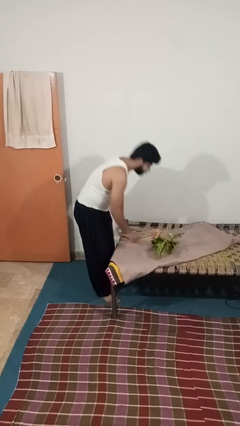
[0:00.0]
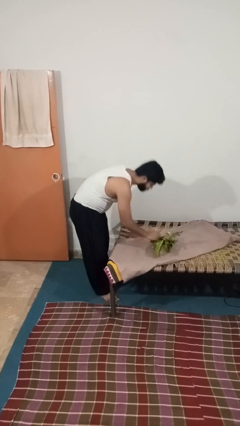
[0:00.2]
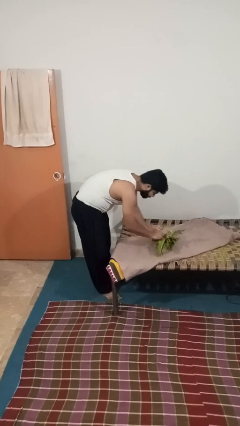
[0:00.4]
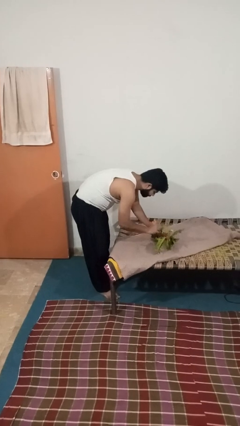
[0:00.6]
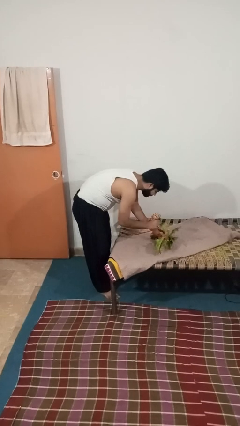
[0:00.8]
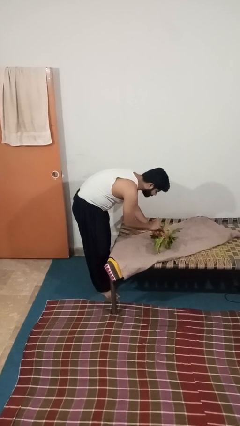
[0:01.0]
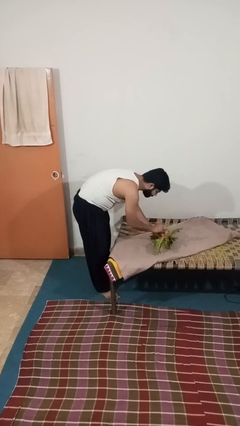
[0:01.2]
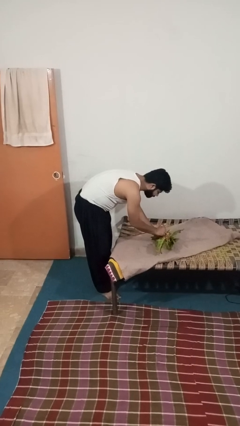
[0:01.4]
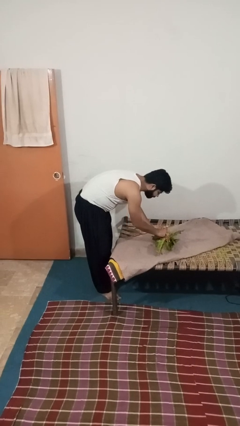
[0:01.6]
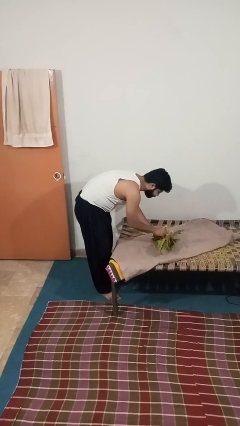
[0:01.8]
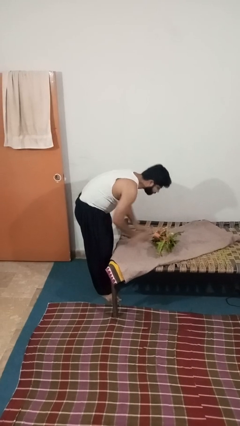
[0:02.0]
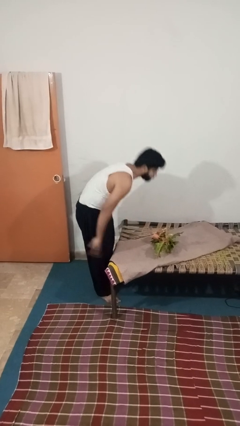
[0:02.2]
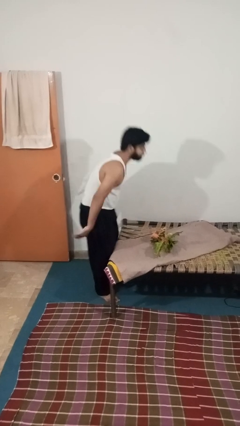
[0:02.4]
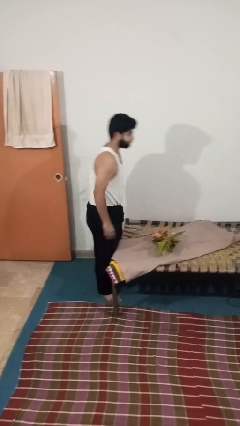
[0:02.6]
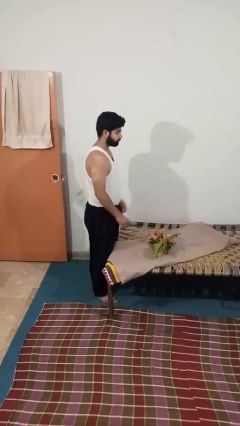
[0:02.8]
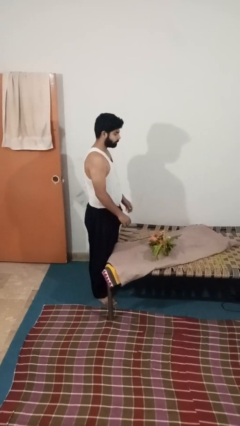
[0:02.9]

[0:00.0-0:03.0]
person climbs off chair

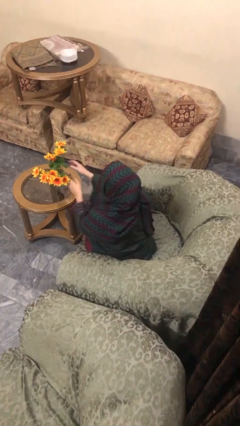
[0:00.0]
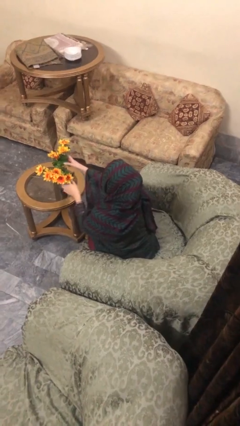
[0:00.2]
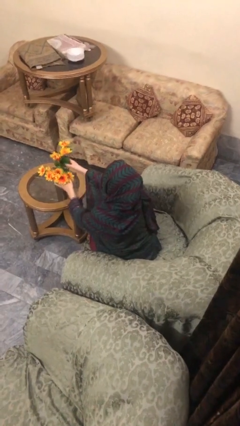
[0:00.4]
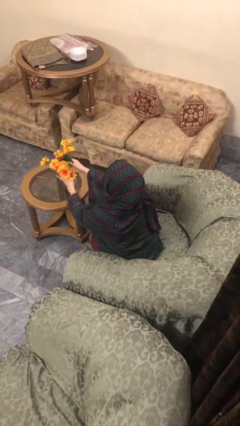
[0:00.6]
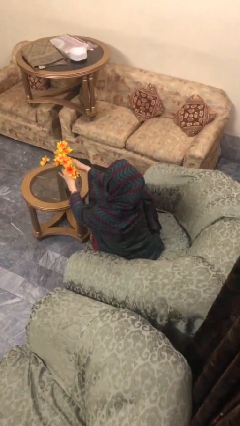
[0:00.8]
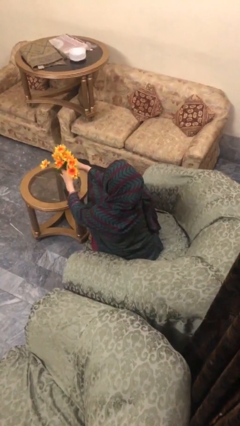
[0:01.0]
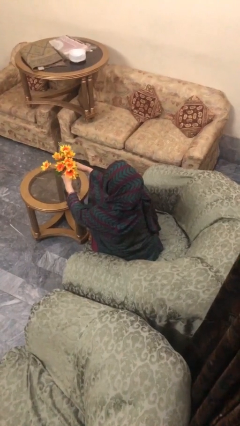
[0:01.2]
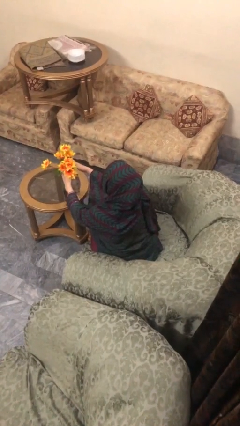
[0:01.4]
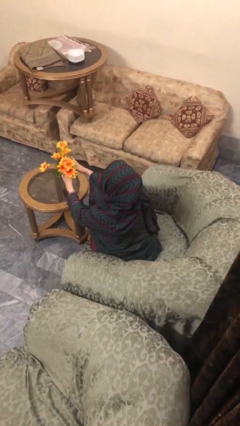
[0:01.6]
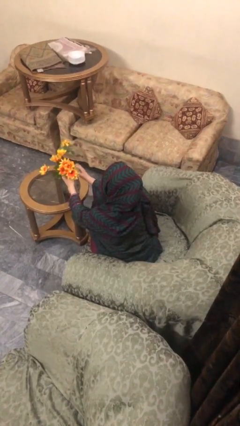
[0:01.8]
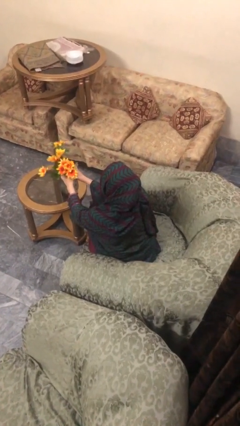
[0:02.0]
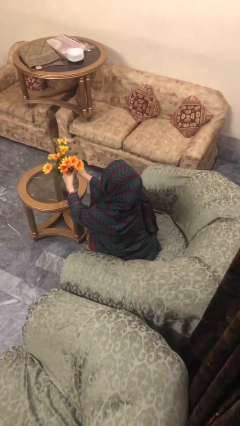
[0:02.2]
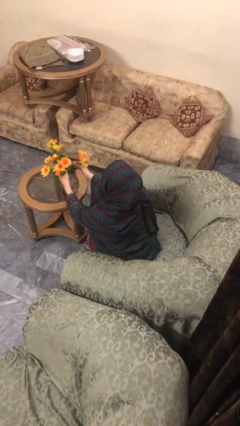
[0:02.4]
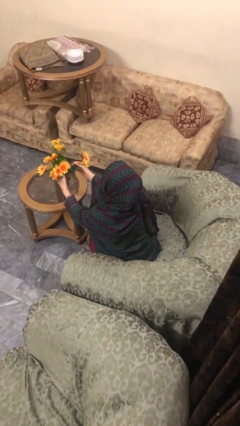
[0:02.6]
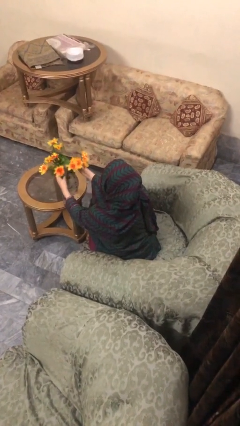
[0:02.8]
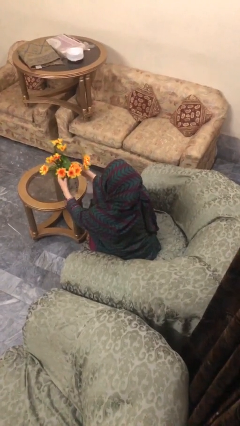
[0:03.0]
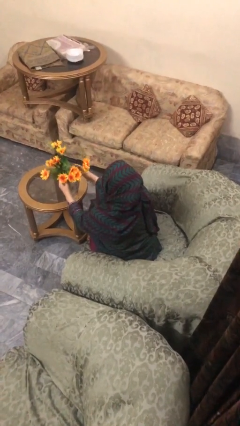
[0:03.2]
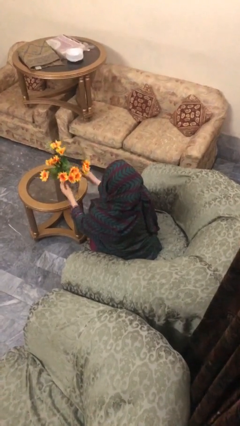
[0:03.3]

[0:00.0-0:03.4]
person arranges flowers in vase

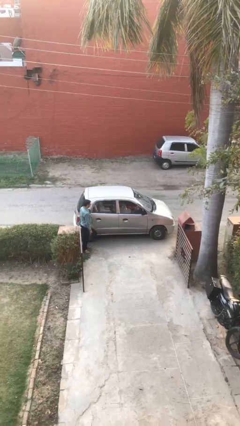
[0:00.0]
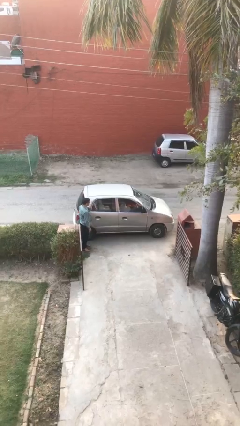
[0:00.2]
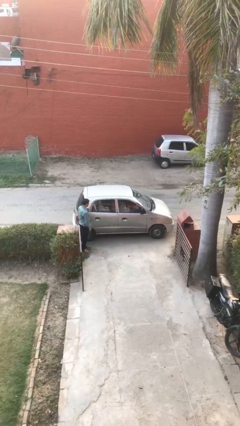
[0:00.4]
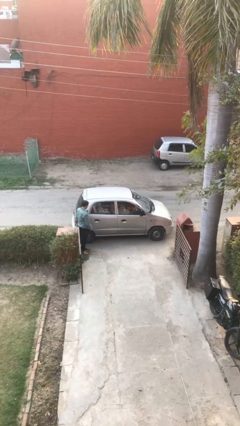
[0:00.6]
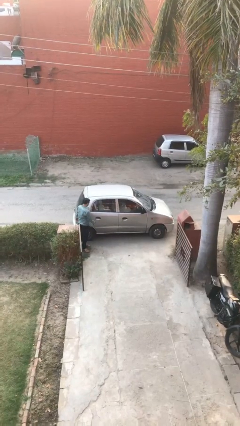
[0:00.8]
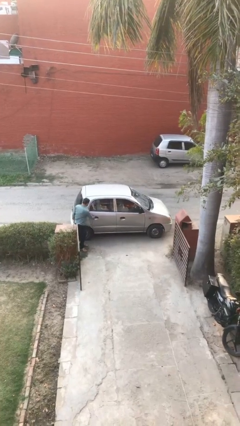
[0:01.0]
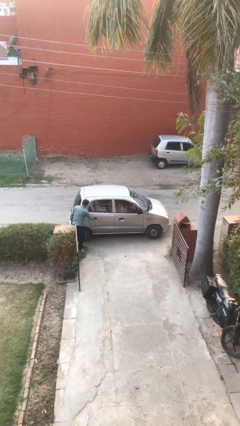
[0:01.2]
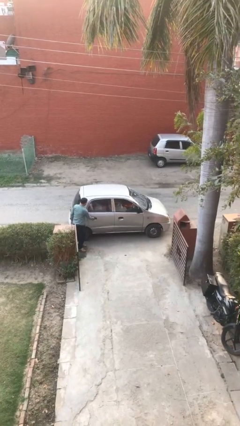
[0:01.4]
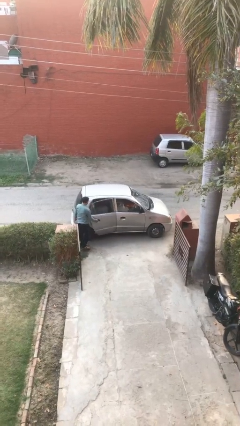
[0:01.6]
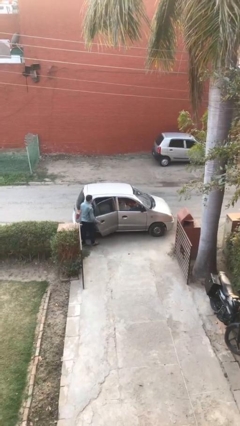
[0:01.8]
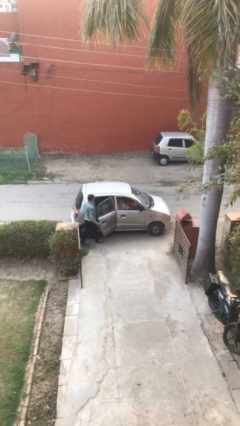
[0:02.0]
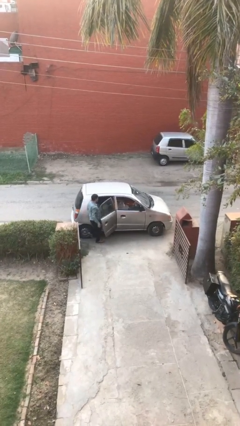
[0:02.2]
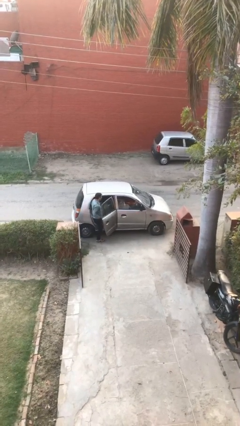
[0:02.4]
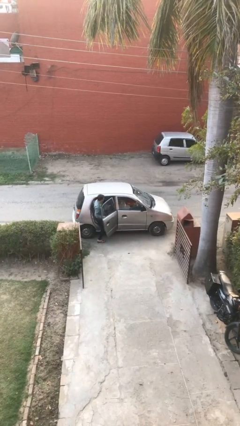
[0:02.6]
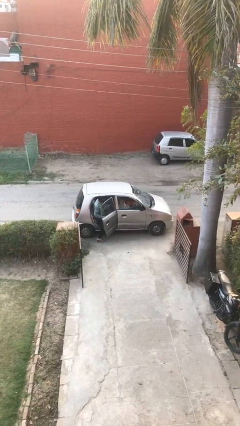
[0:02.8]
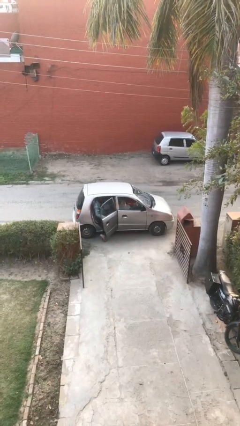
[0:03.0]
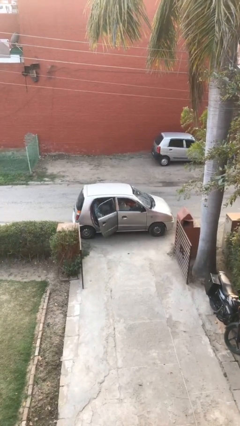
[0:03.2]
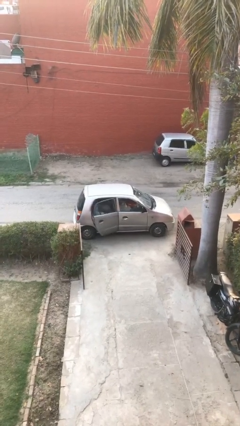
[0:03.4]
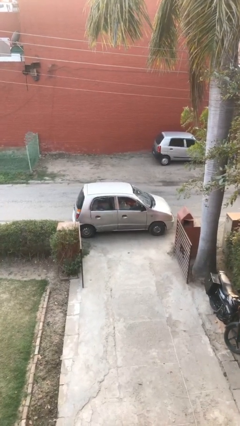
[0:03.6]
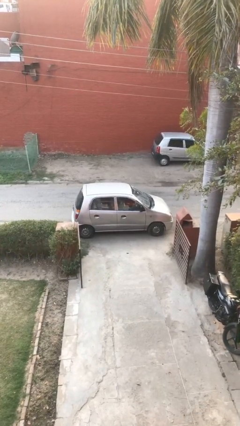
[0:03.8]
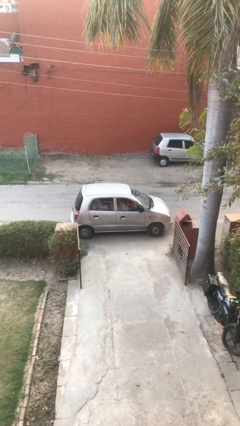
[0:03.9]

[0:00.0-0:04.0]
car picks up person

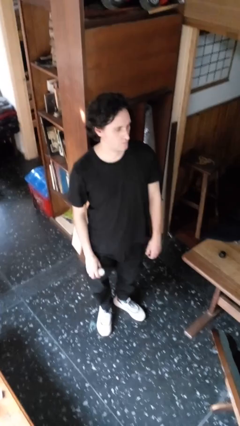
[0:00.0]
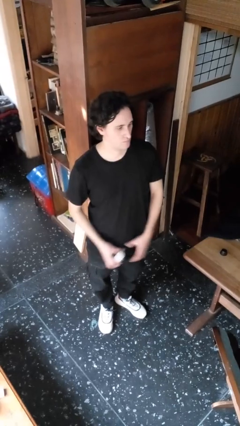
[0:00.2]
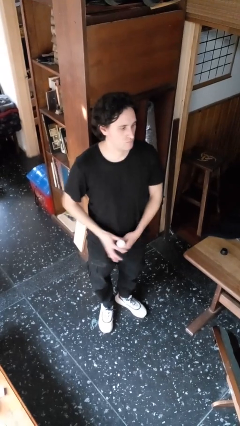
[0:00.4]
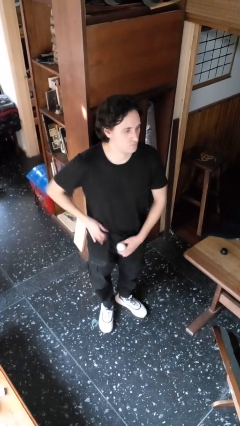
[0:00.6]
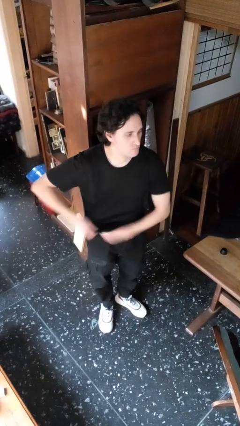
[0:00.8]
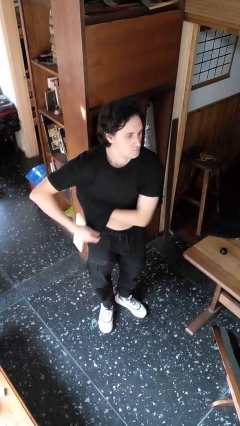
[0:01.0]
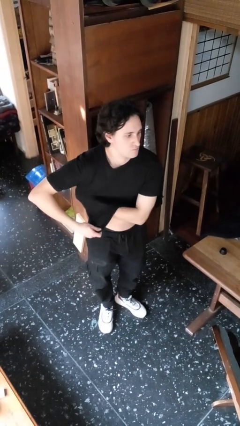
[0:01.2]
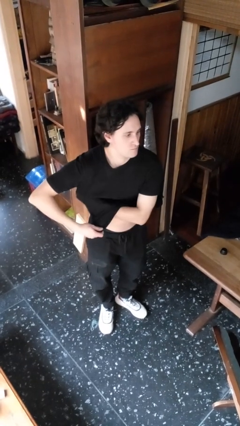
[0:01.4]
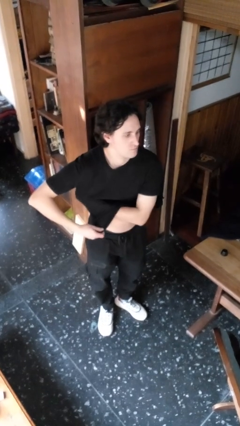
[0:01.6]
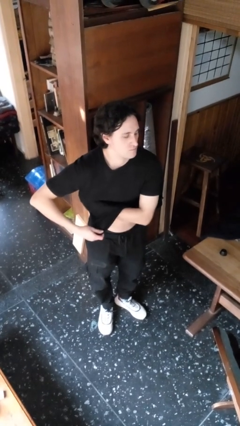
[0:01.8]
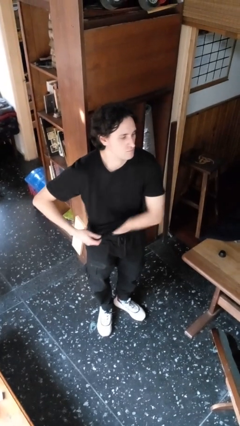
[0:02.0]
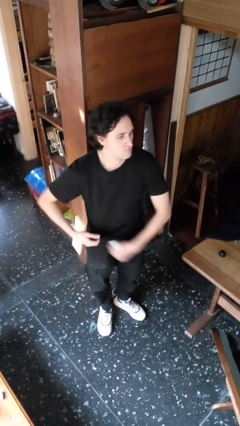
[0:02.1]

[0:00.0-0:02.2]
person applies deodorant

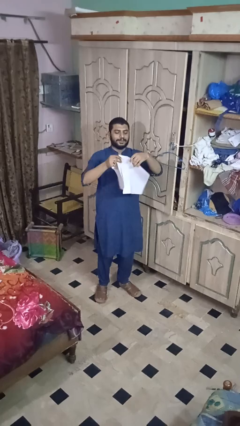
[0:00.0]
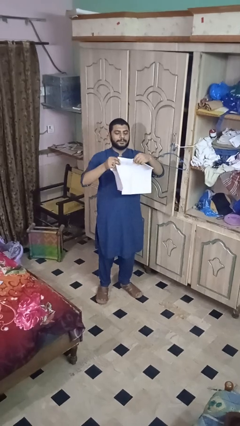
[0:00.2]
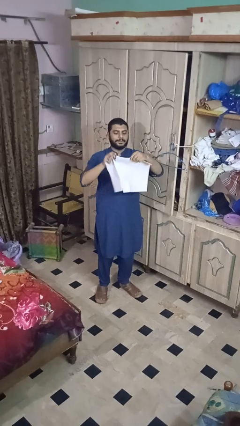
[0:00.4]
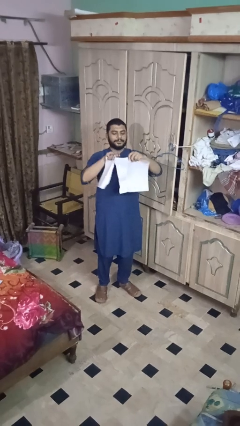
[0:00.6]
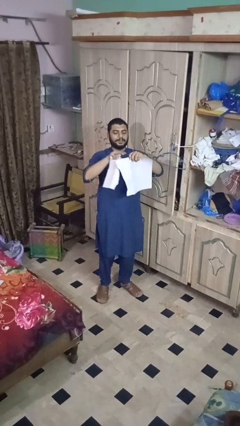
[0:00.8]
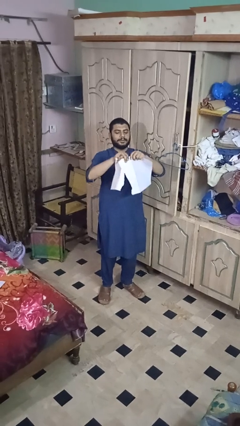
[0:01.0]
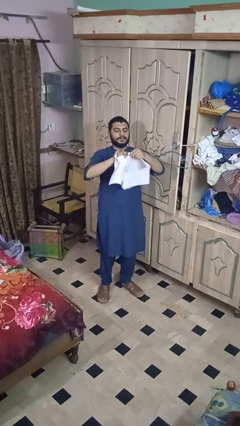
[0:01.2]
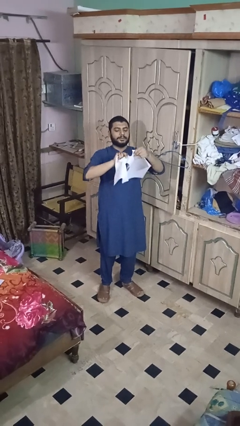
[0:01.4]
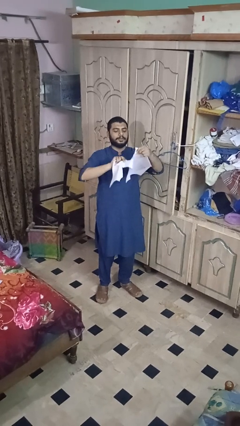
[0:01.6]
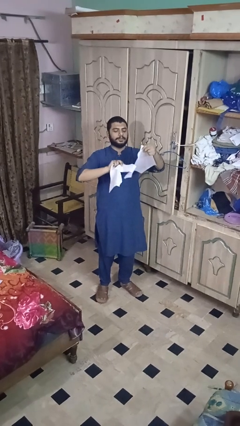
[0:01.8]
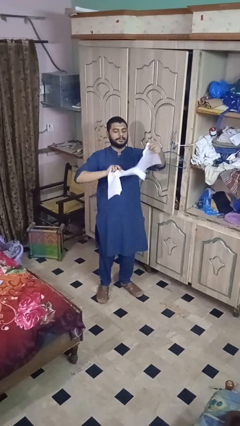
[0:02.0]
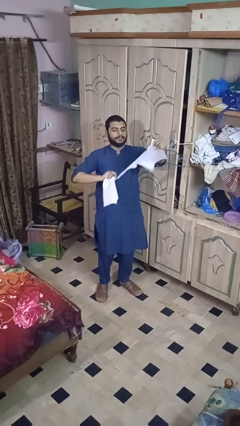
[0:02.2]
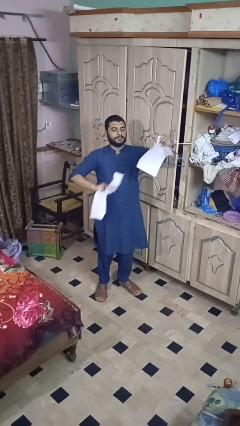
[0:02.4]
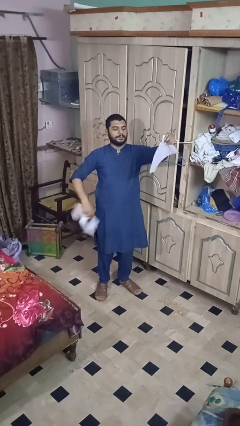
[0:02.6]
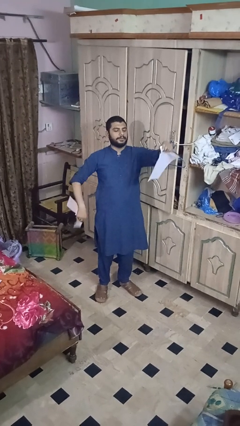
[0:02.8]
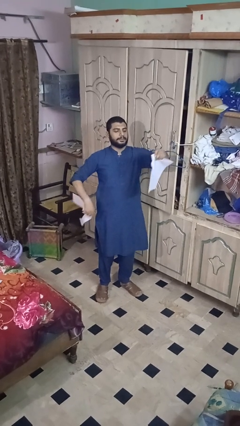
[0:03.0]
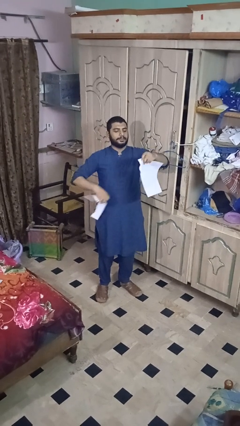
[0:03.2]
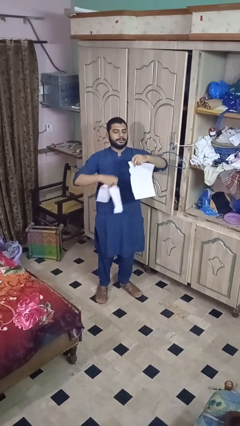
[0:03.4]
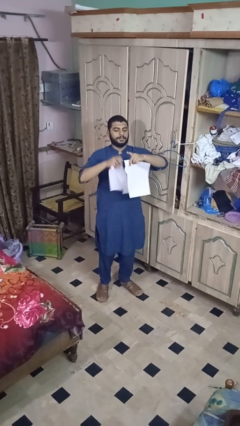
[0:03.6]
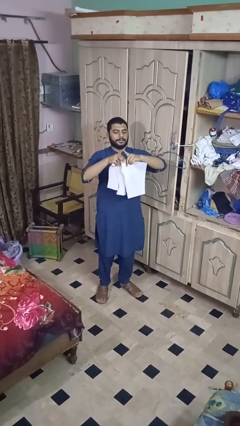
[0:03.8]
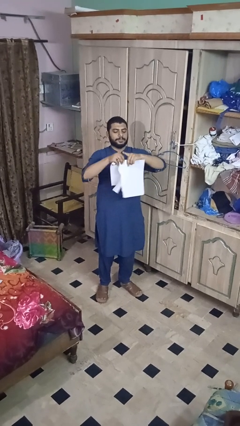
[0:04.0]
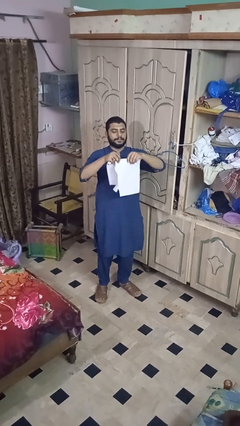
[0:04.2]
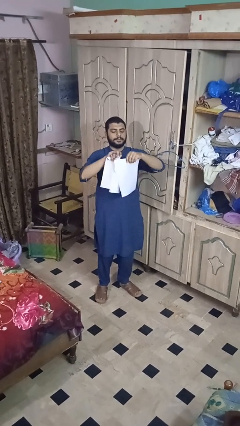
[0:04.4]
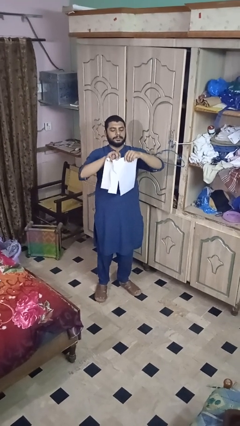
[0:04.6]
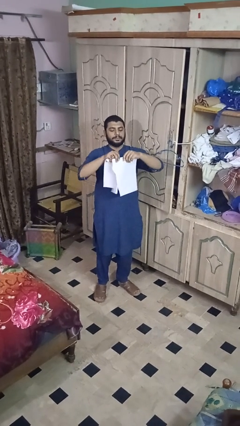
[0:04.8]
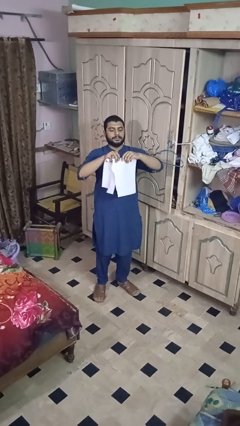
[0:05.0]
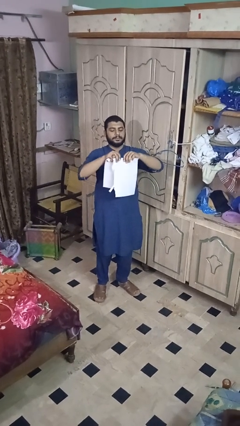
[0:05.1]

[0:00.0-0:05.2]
person tears paper

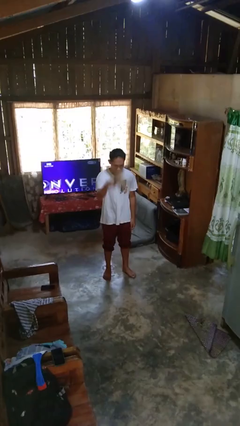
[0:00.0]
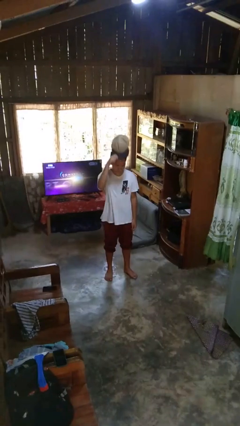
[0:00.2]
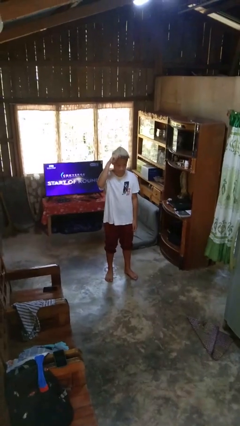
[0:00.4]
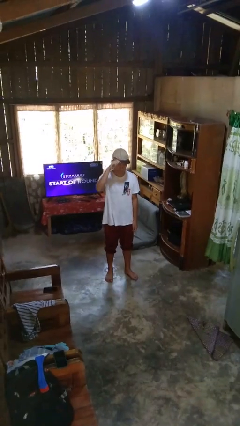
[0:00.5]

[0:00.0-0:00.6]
person puts on hat
